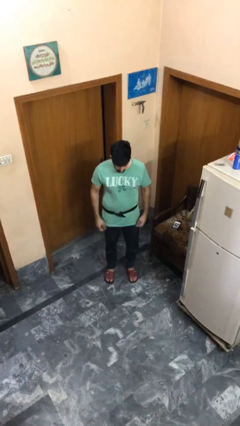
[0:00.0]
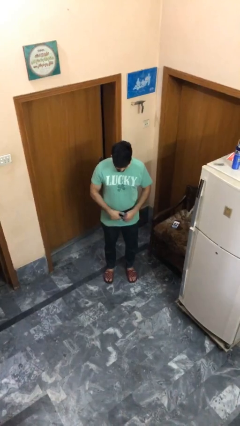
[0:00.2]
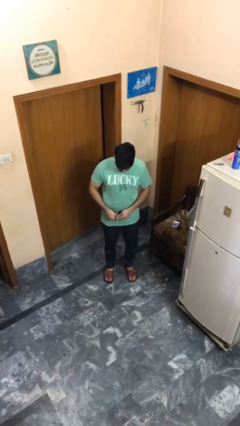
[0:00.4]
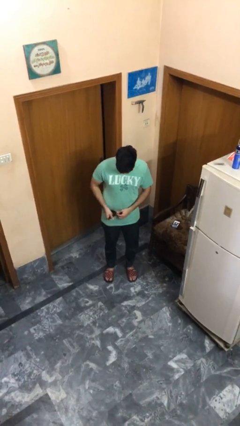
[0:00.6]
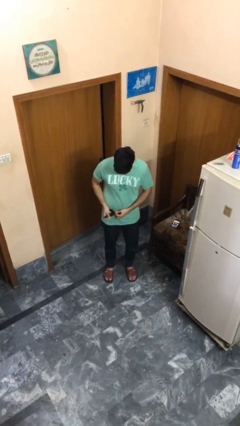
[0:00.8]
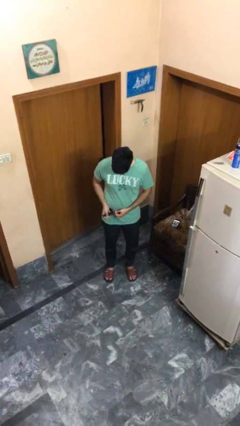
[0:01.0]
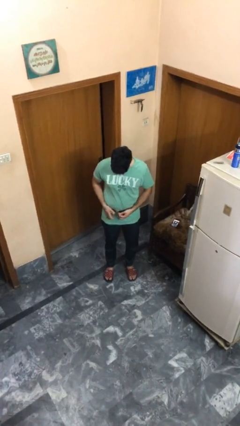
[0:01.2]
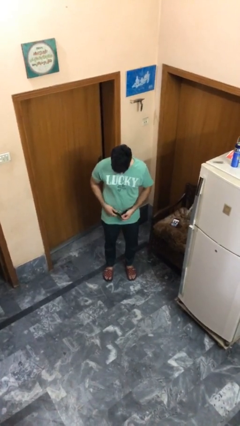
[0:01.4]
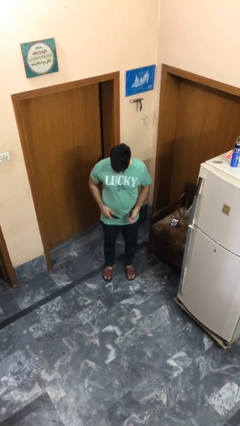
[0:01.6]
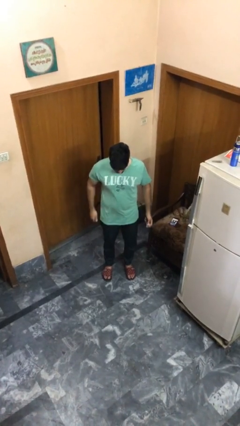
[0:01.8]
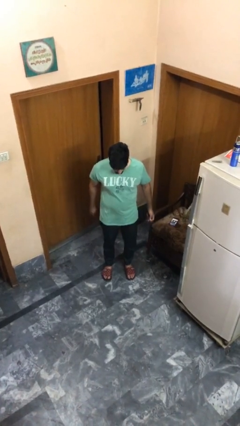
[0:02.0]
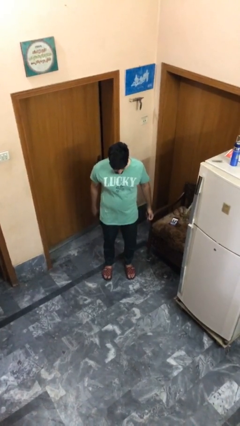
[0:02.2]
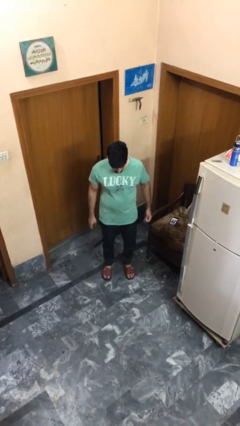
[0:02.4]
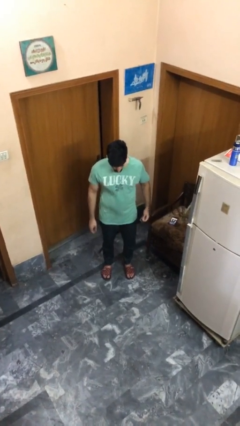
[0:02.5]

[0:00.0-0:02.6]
person takes off belt

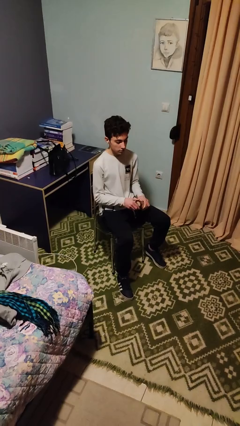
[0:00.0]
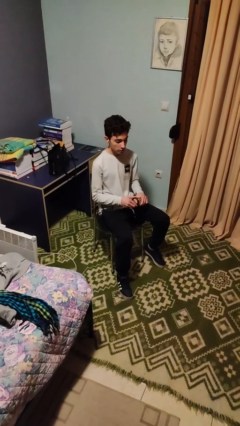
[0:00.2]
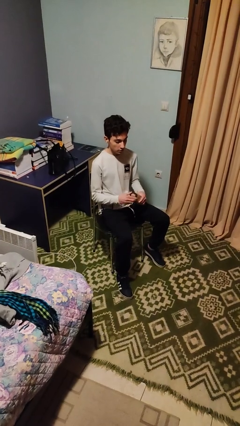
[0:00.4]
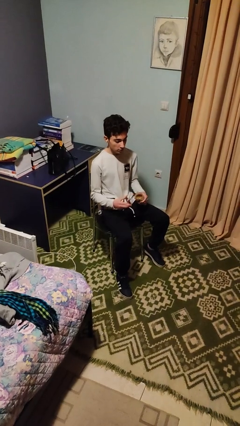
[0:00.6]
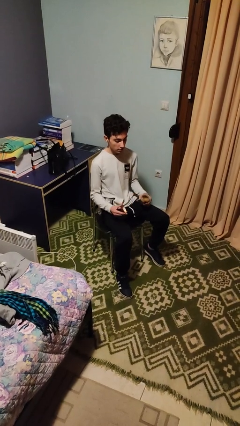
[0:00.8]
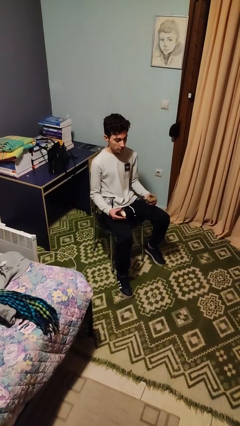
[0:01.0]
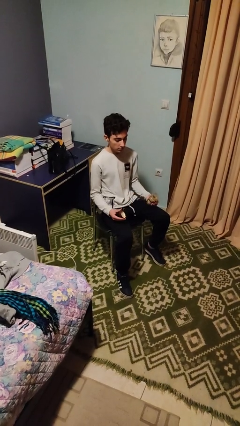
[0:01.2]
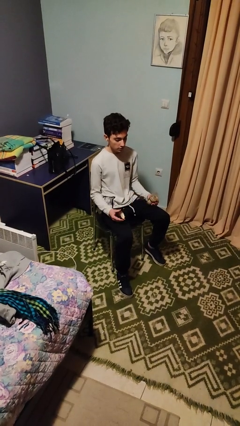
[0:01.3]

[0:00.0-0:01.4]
person opens jar

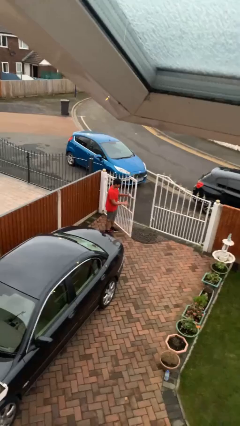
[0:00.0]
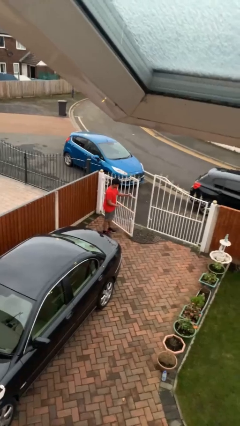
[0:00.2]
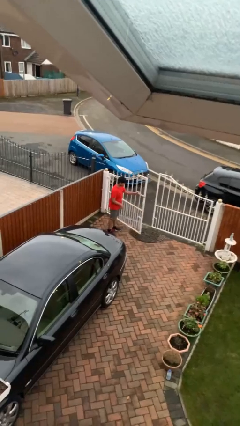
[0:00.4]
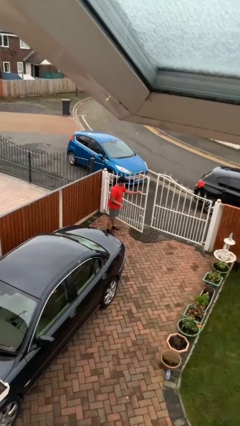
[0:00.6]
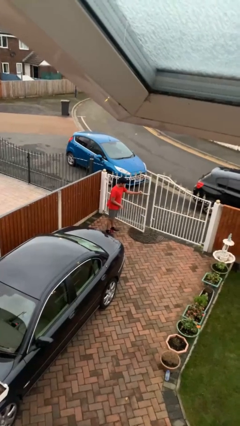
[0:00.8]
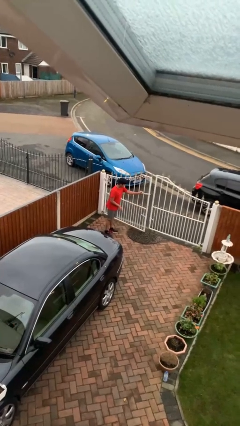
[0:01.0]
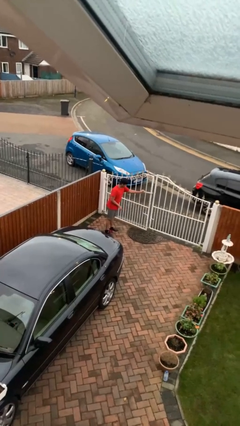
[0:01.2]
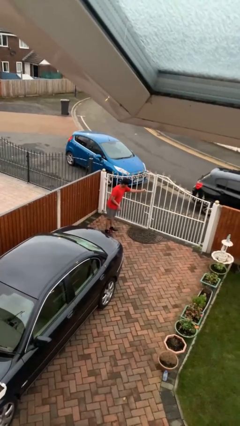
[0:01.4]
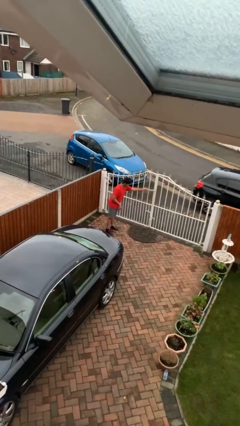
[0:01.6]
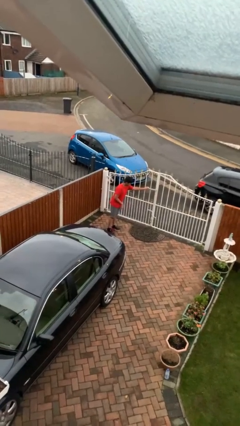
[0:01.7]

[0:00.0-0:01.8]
person closes facility door

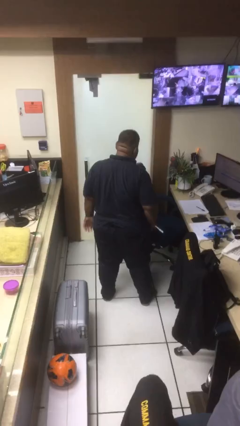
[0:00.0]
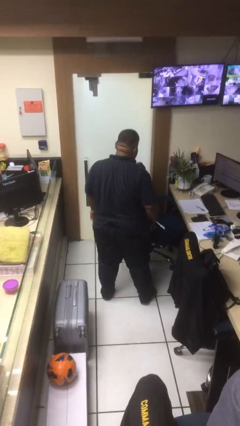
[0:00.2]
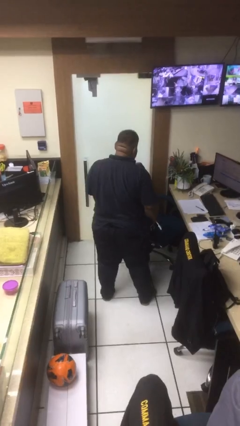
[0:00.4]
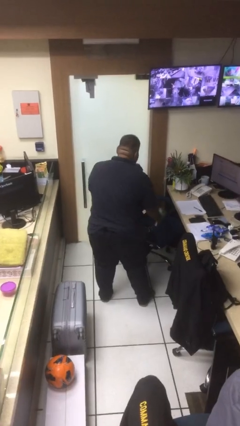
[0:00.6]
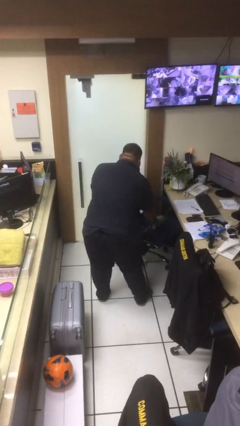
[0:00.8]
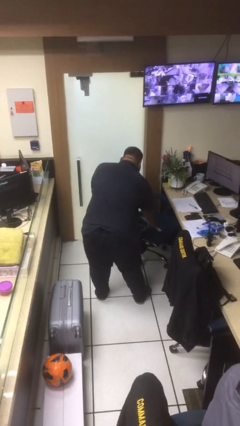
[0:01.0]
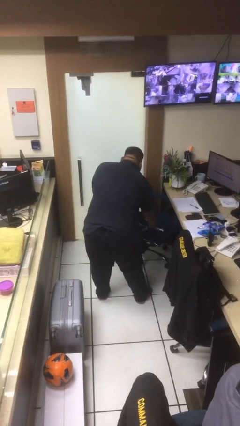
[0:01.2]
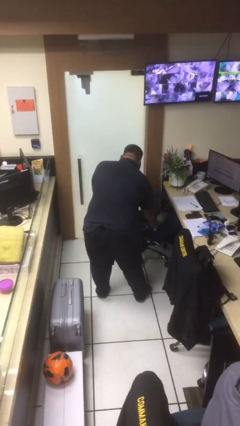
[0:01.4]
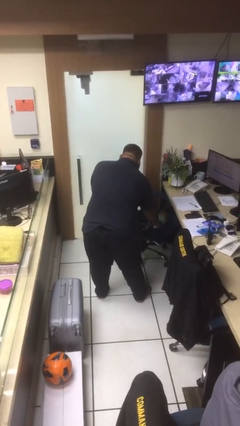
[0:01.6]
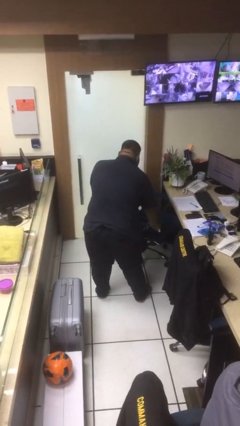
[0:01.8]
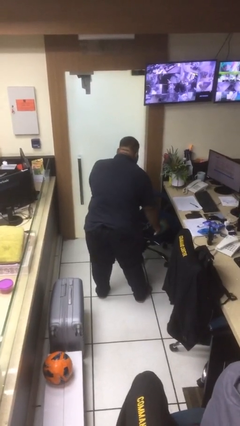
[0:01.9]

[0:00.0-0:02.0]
person dusts furniture

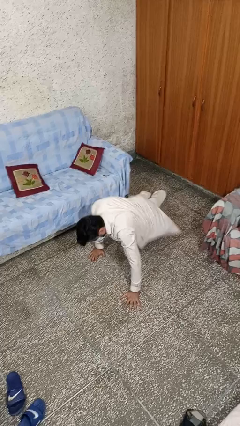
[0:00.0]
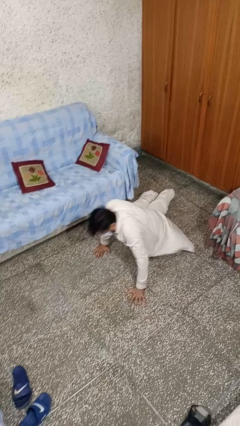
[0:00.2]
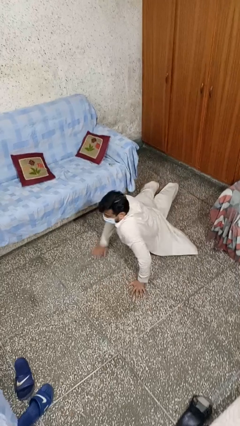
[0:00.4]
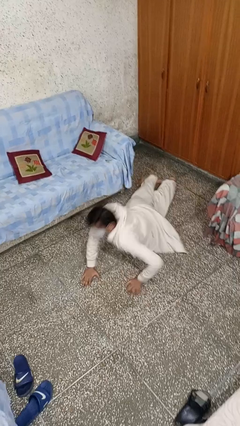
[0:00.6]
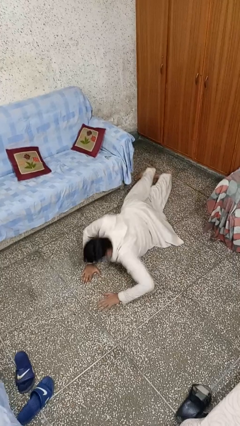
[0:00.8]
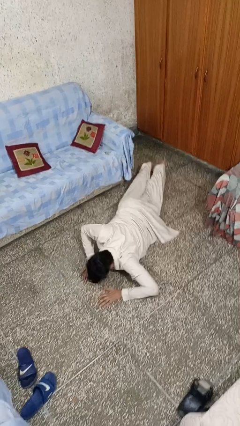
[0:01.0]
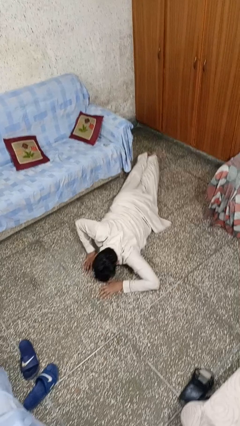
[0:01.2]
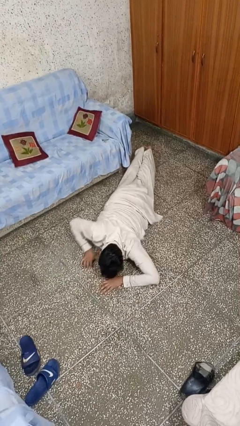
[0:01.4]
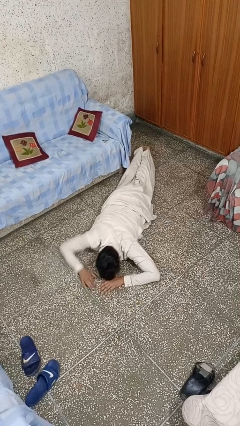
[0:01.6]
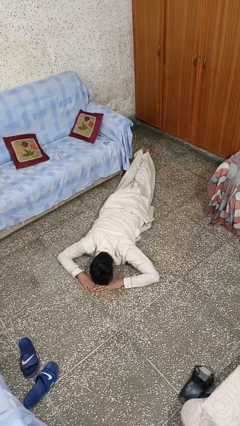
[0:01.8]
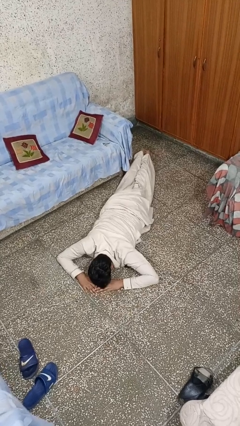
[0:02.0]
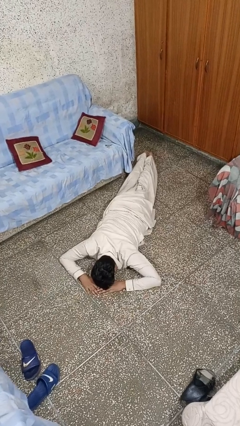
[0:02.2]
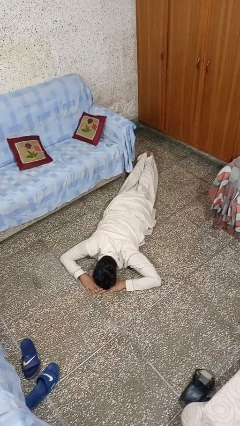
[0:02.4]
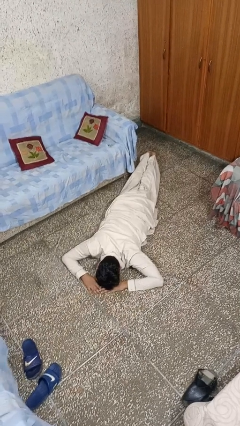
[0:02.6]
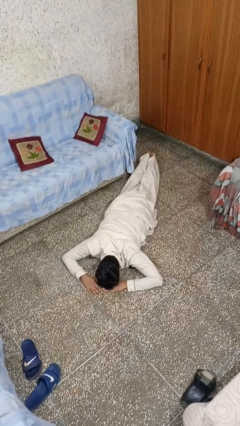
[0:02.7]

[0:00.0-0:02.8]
person lies down on floor

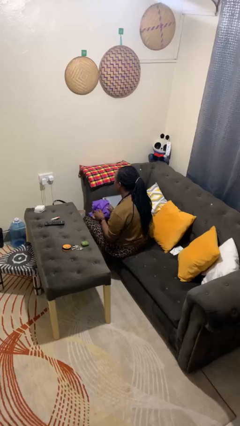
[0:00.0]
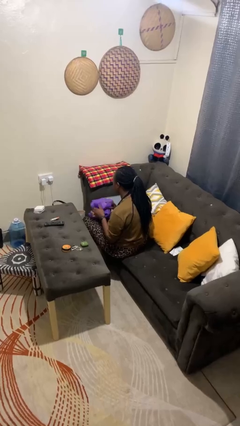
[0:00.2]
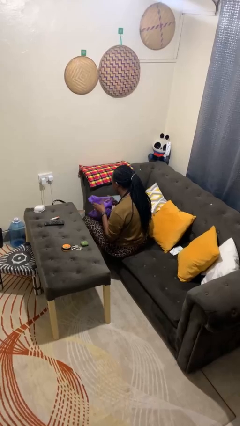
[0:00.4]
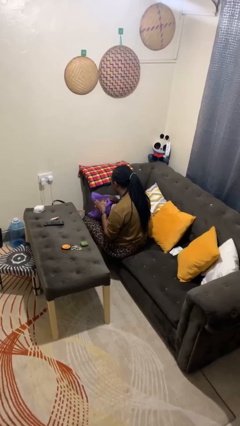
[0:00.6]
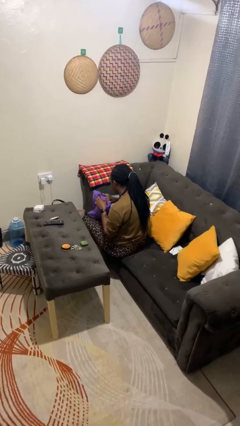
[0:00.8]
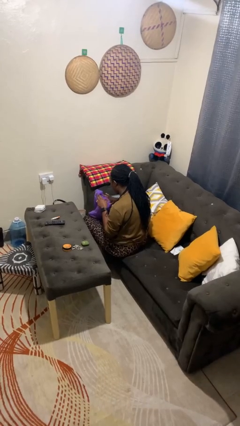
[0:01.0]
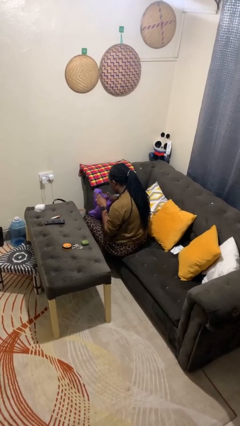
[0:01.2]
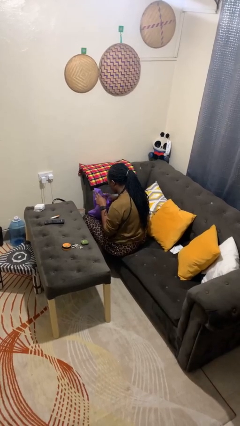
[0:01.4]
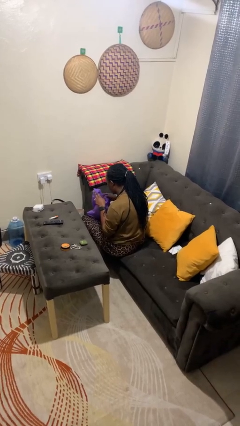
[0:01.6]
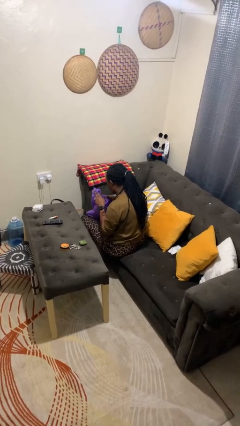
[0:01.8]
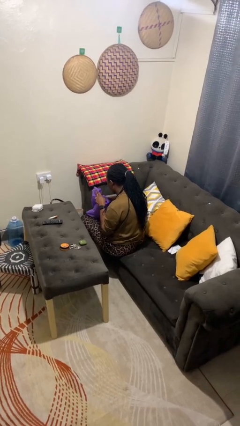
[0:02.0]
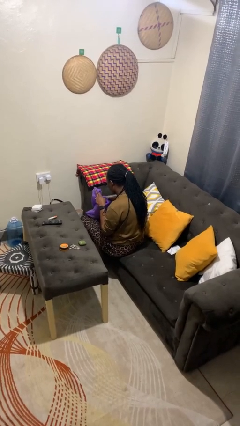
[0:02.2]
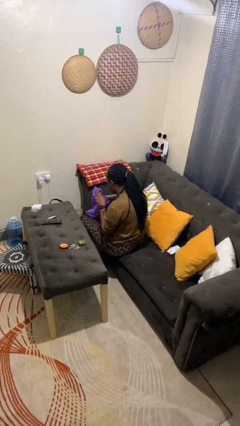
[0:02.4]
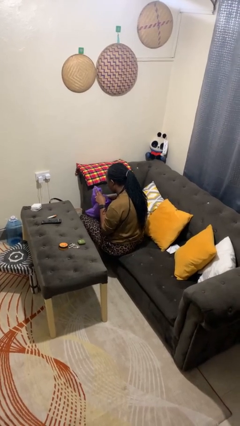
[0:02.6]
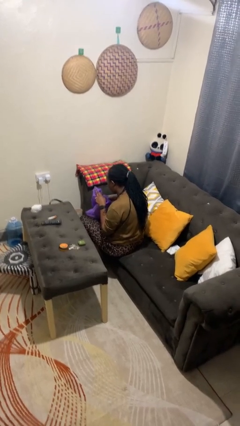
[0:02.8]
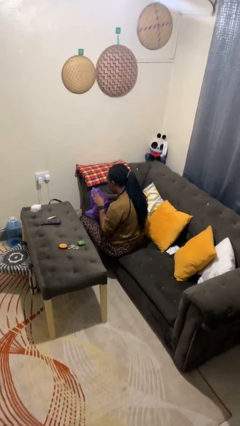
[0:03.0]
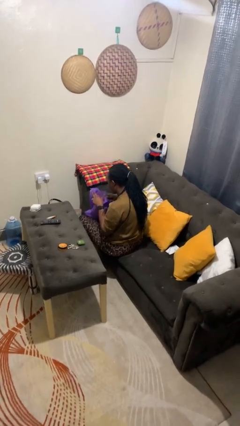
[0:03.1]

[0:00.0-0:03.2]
person searches in bag

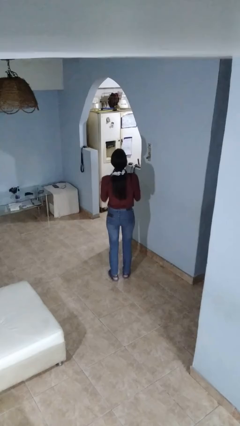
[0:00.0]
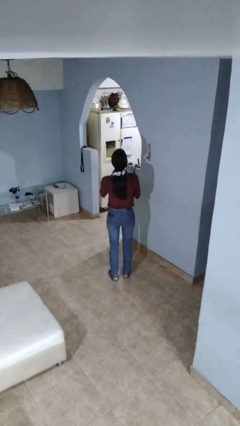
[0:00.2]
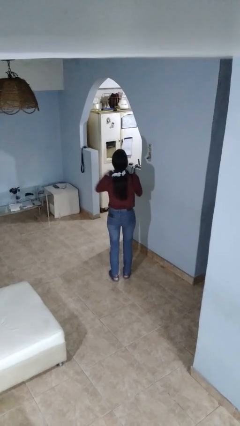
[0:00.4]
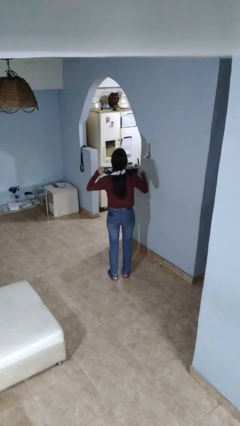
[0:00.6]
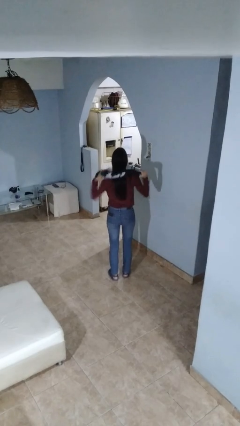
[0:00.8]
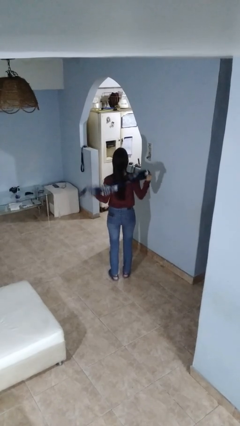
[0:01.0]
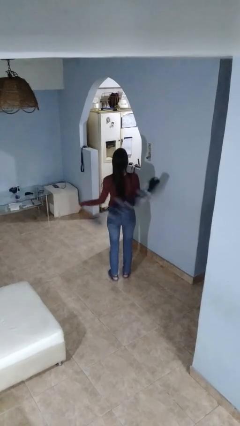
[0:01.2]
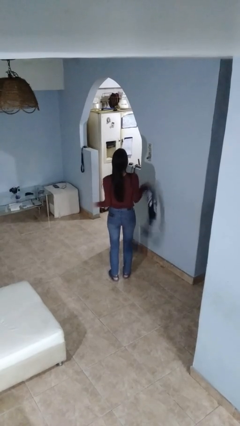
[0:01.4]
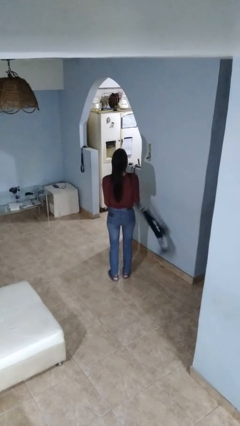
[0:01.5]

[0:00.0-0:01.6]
person takes off scarf

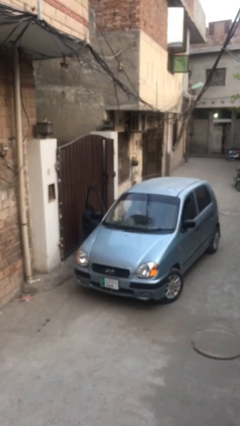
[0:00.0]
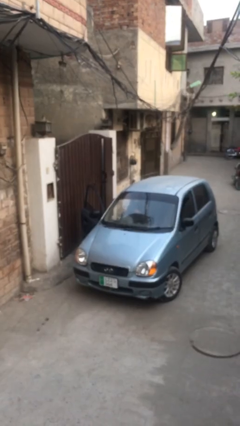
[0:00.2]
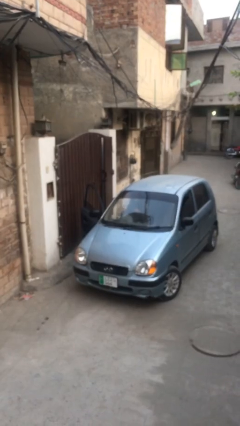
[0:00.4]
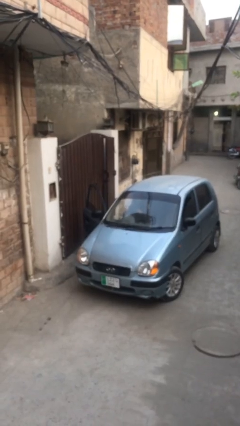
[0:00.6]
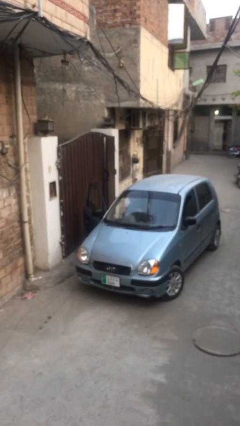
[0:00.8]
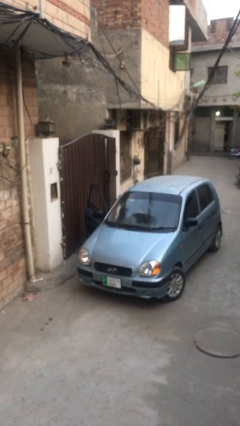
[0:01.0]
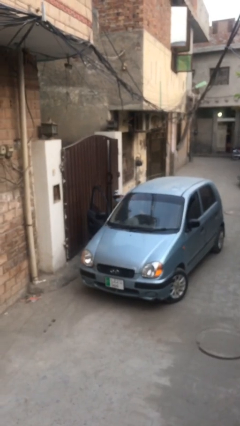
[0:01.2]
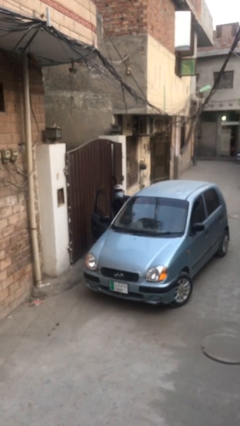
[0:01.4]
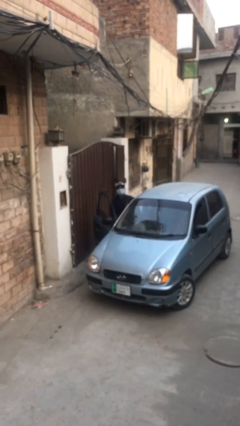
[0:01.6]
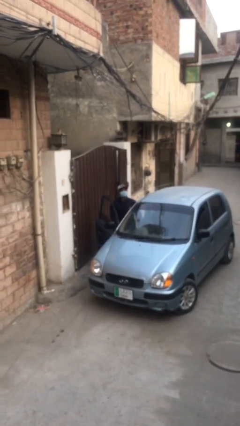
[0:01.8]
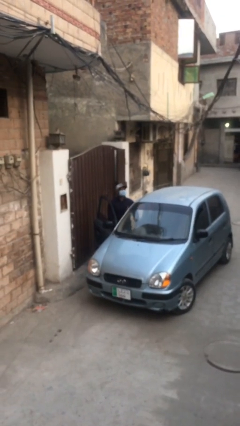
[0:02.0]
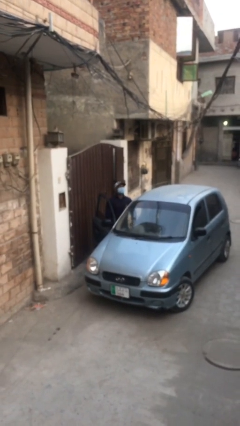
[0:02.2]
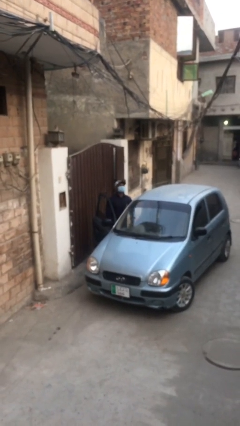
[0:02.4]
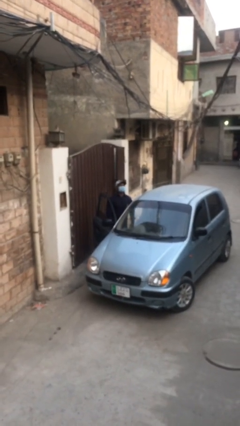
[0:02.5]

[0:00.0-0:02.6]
person exits car
